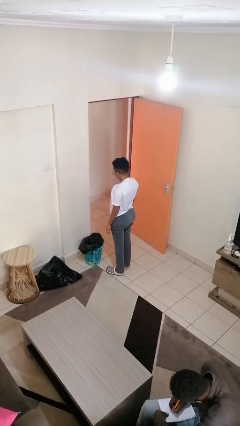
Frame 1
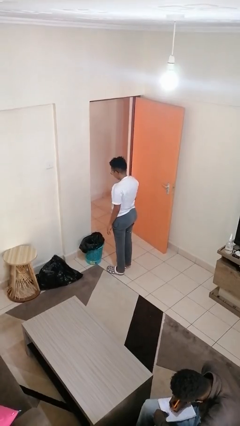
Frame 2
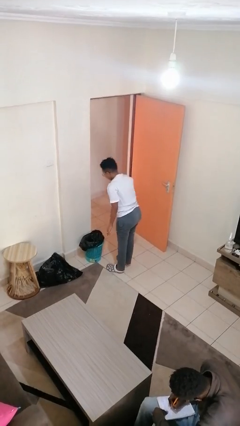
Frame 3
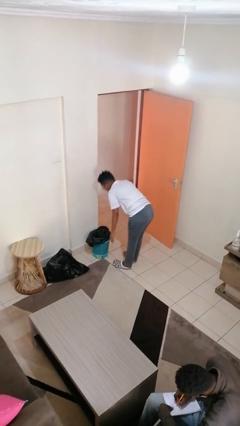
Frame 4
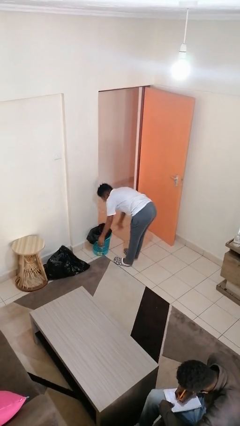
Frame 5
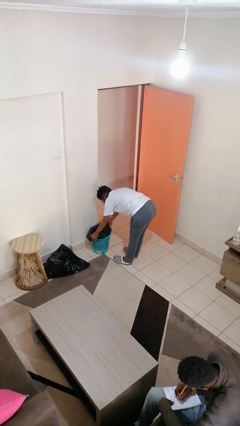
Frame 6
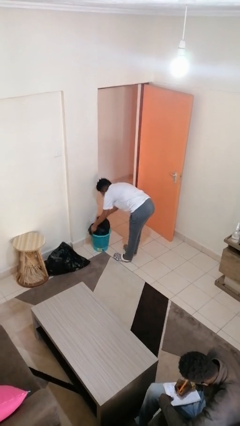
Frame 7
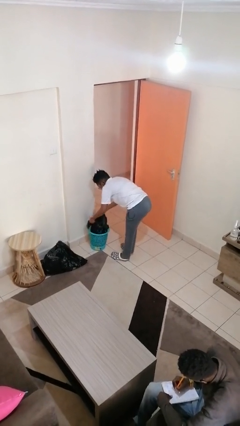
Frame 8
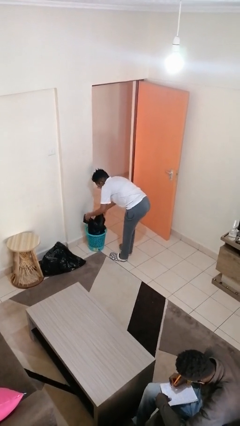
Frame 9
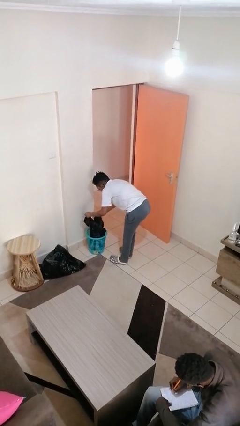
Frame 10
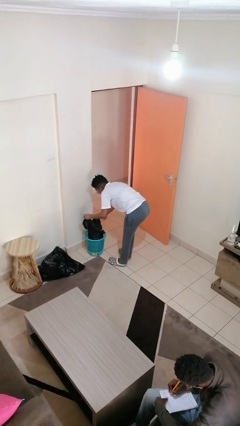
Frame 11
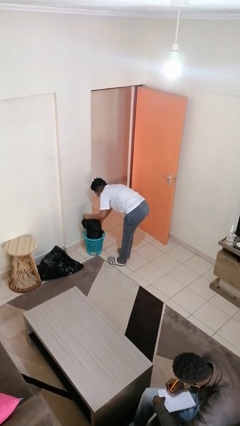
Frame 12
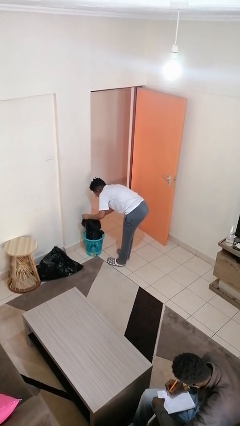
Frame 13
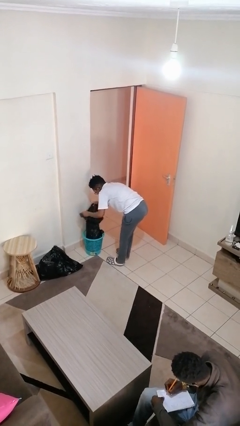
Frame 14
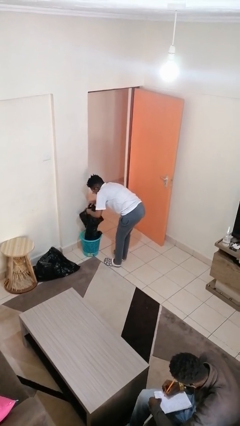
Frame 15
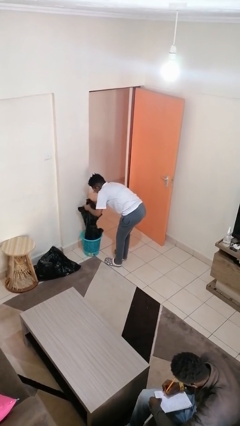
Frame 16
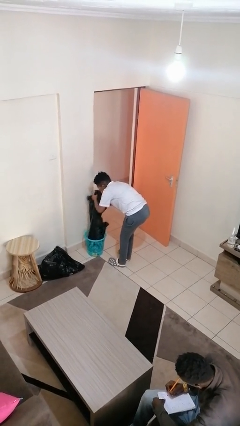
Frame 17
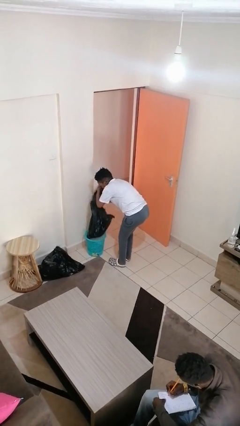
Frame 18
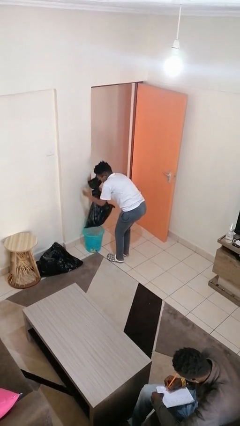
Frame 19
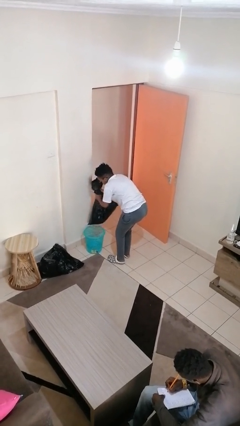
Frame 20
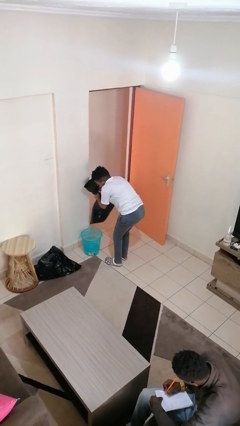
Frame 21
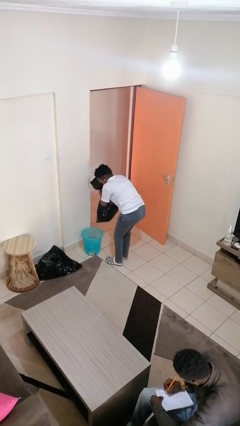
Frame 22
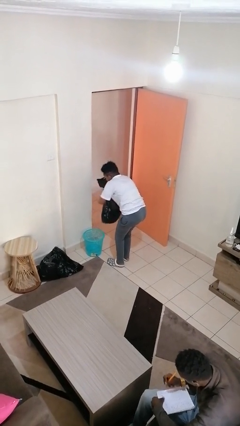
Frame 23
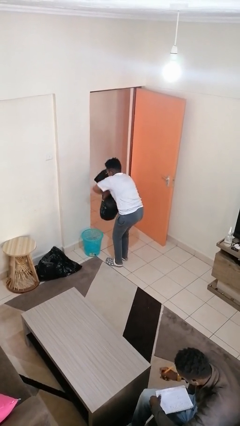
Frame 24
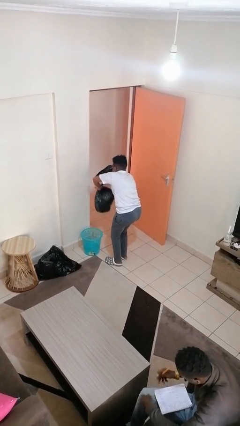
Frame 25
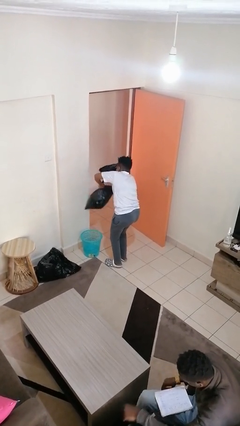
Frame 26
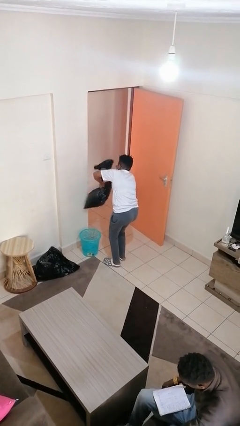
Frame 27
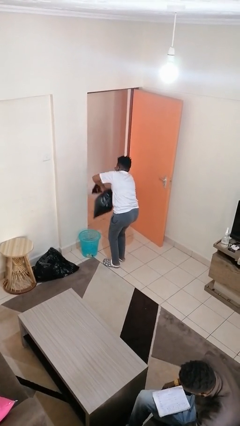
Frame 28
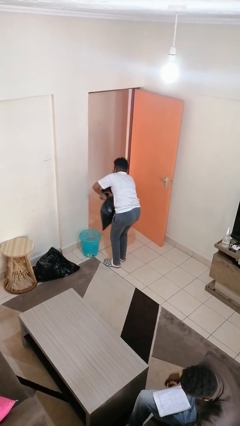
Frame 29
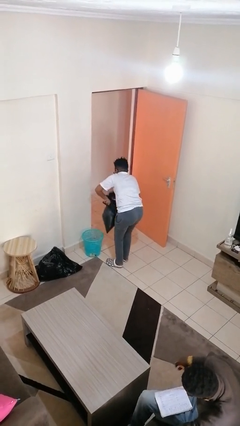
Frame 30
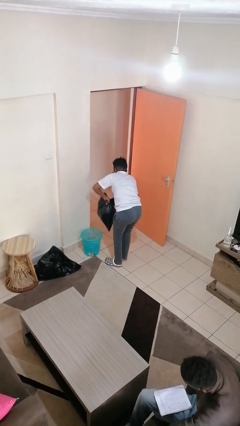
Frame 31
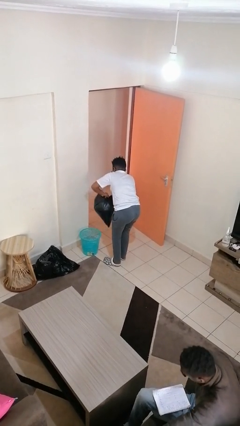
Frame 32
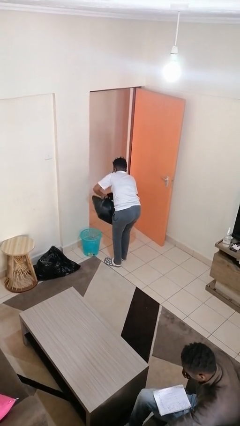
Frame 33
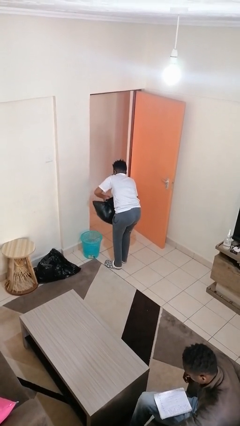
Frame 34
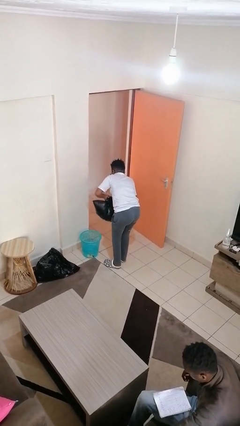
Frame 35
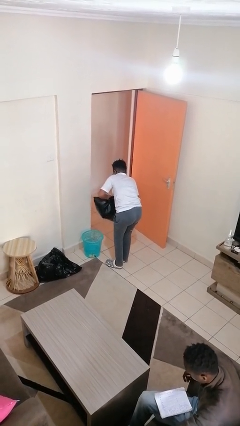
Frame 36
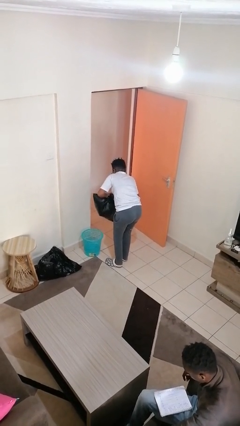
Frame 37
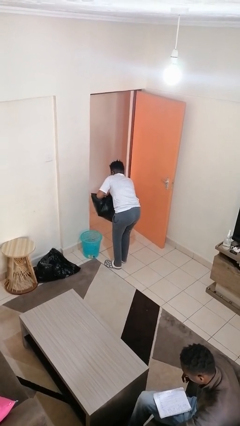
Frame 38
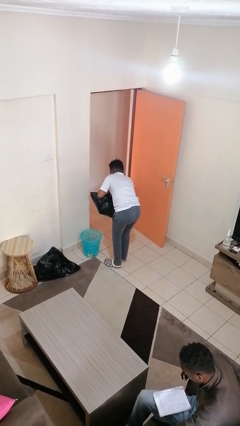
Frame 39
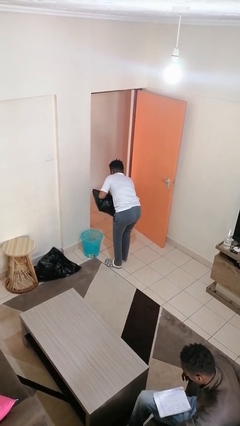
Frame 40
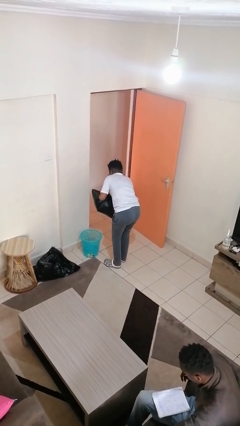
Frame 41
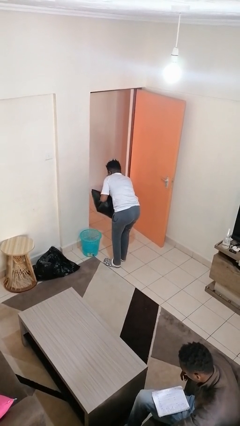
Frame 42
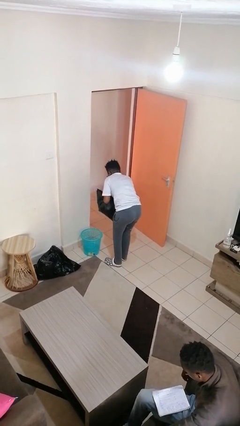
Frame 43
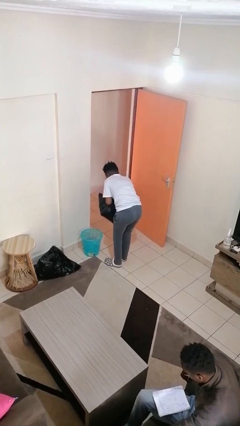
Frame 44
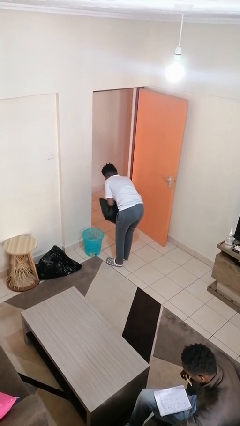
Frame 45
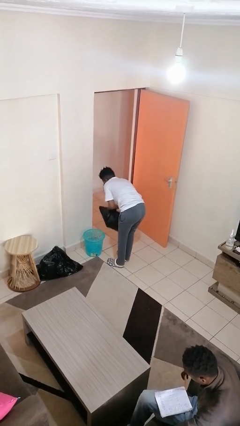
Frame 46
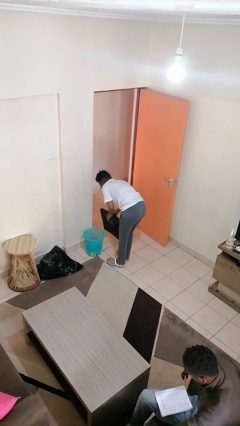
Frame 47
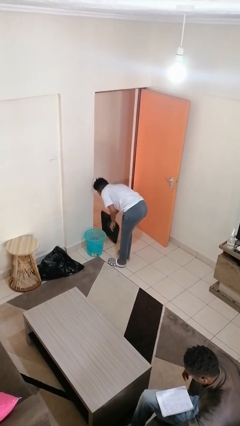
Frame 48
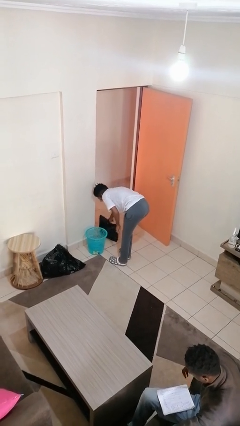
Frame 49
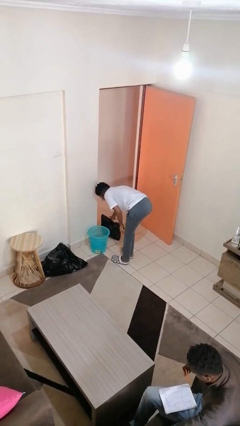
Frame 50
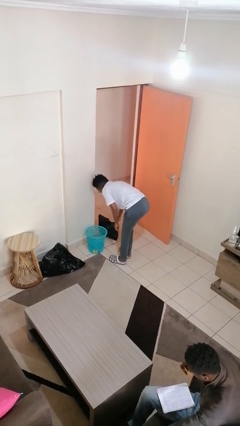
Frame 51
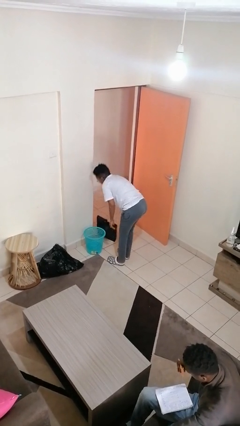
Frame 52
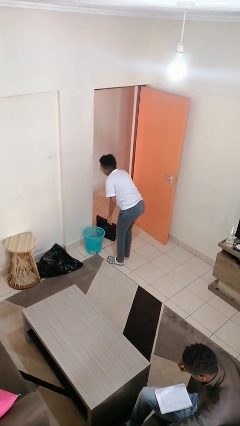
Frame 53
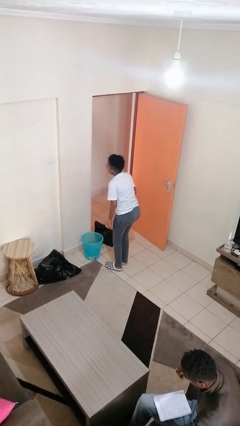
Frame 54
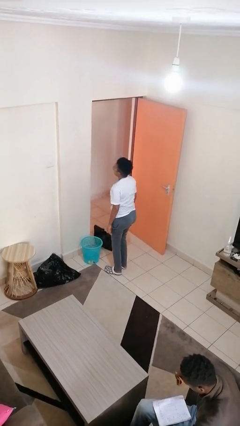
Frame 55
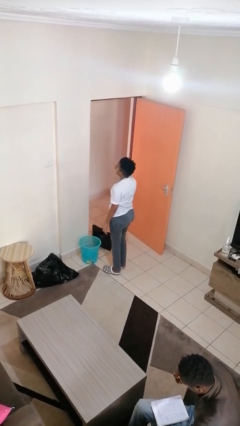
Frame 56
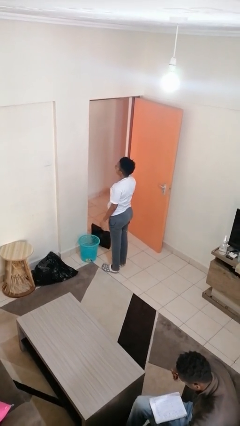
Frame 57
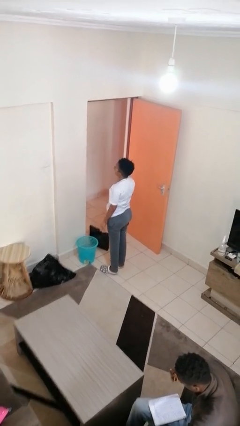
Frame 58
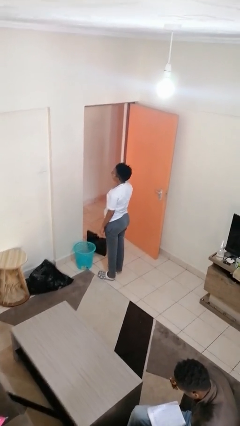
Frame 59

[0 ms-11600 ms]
person removes trashbag from trashcan

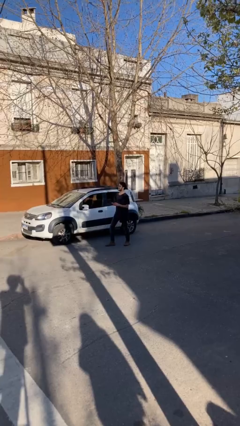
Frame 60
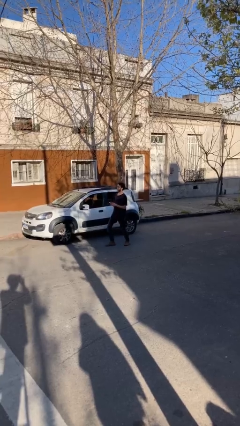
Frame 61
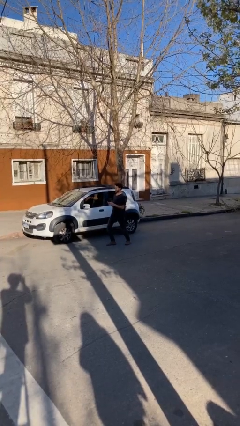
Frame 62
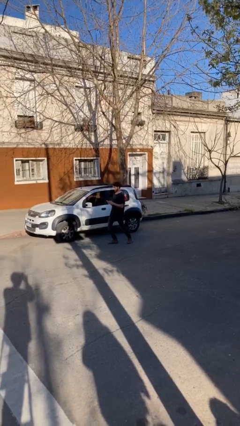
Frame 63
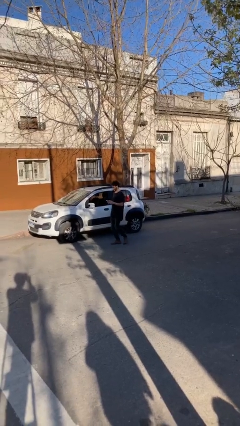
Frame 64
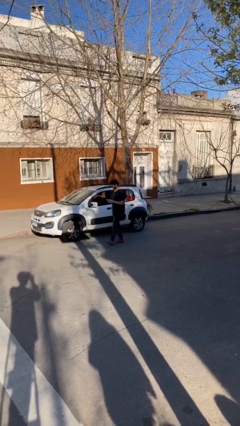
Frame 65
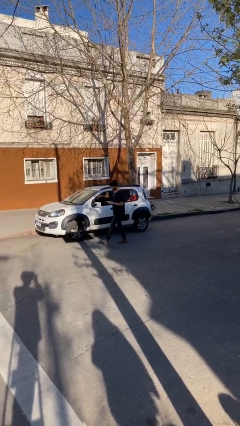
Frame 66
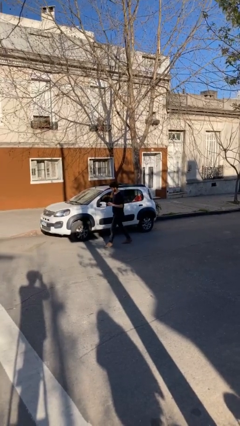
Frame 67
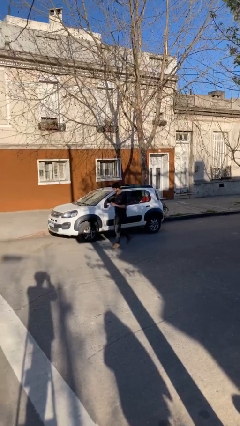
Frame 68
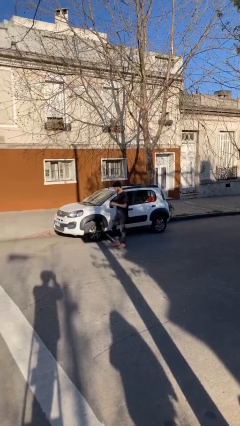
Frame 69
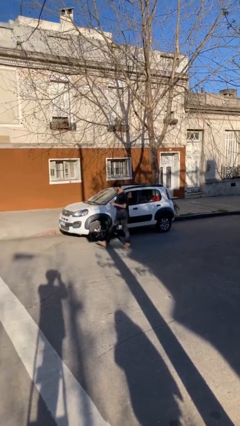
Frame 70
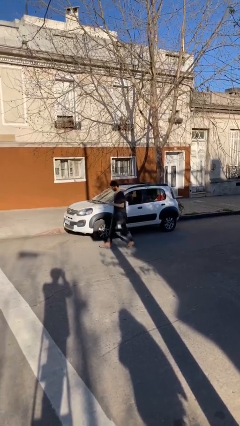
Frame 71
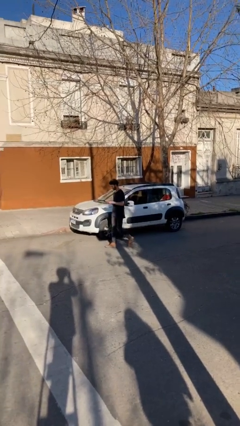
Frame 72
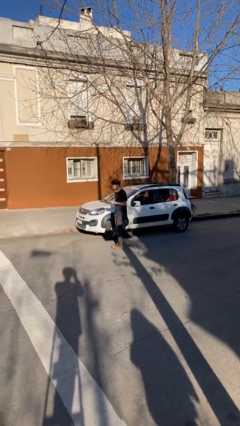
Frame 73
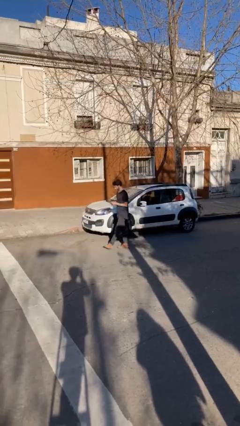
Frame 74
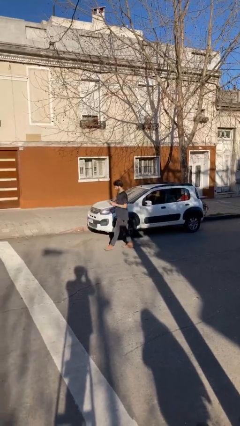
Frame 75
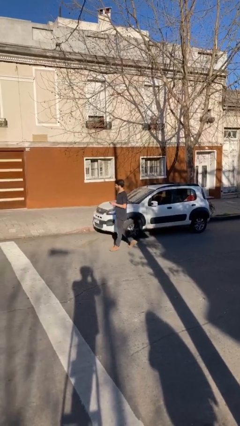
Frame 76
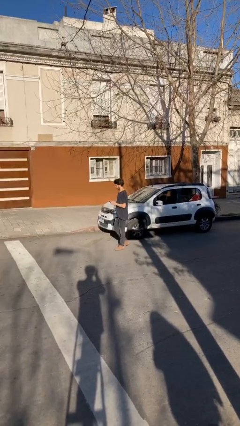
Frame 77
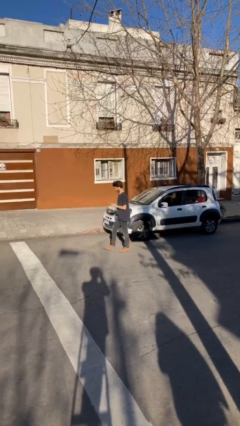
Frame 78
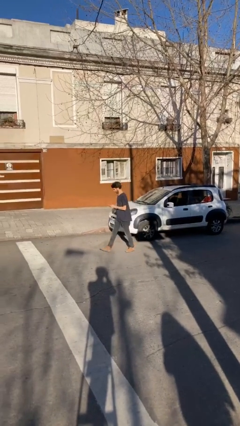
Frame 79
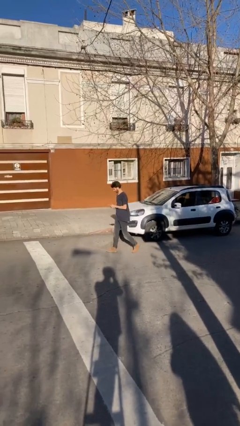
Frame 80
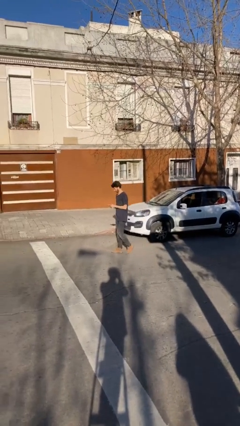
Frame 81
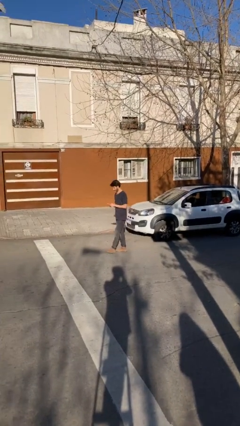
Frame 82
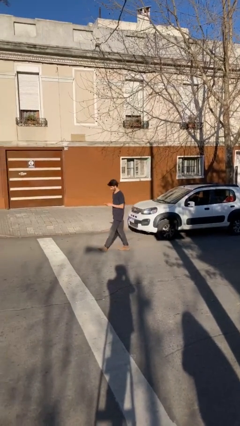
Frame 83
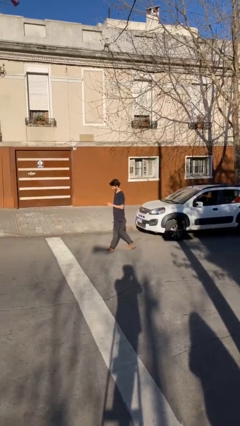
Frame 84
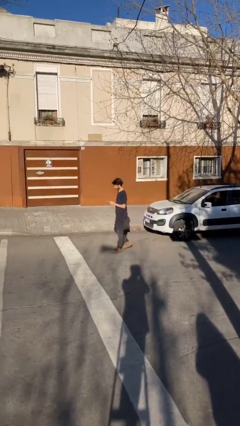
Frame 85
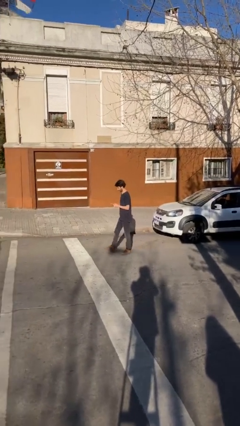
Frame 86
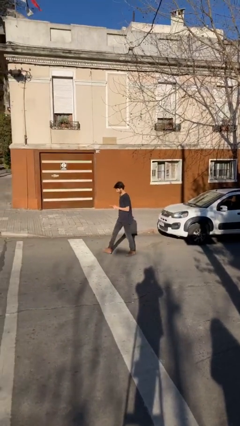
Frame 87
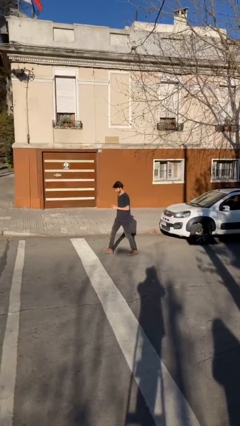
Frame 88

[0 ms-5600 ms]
person texts on phone

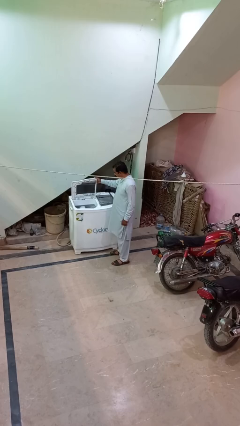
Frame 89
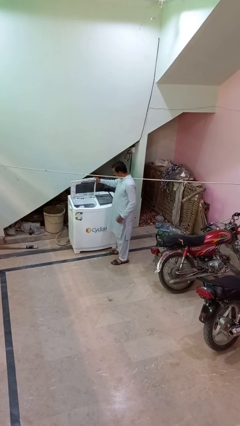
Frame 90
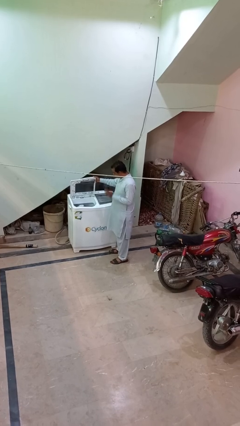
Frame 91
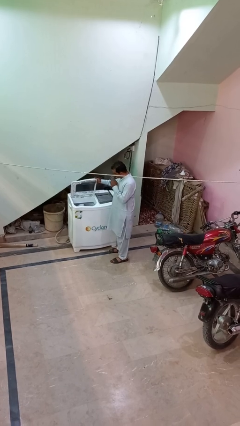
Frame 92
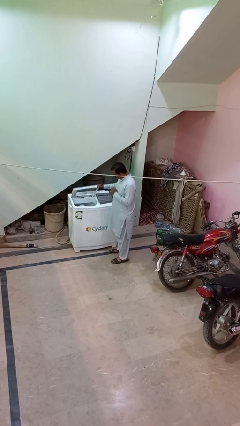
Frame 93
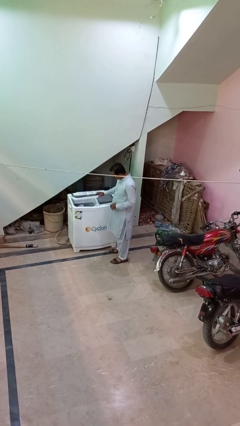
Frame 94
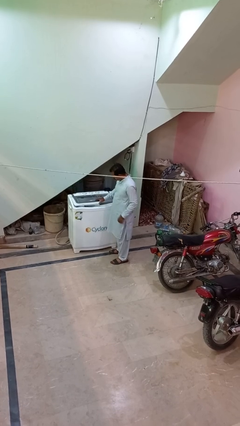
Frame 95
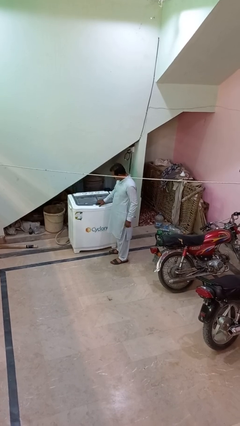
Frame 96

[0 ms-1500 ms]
person closes clothes washer
